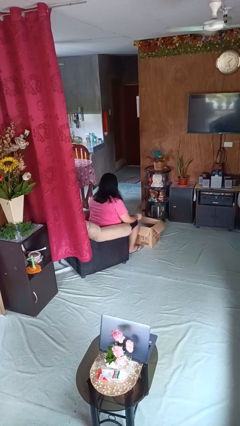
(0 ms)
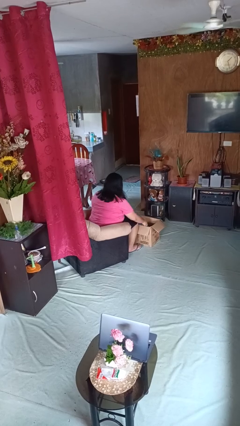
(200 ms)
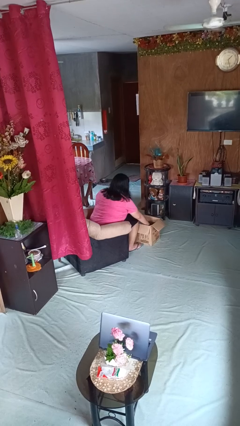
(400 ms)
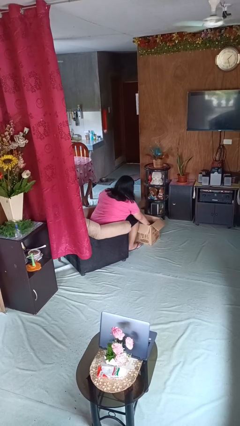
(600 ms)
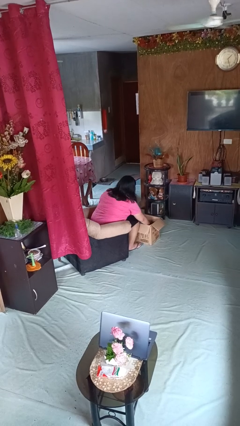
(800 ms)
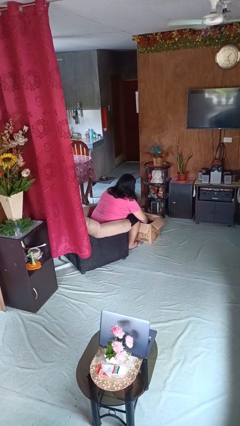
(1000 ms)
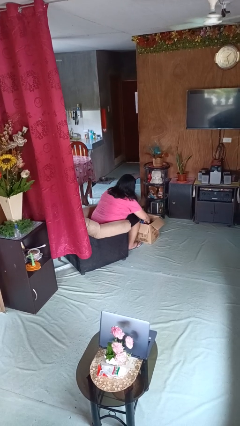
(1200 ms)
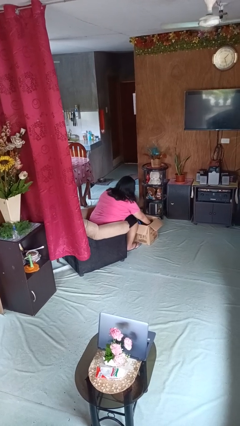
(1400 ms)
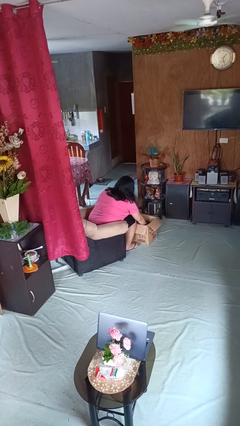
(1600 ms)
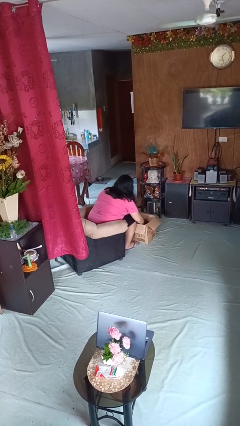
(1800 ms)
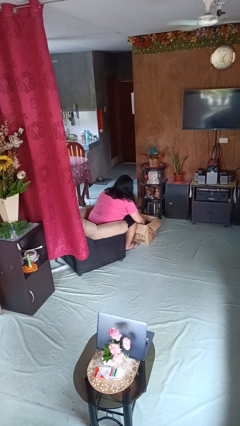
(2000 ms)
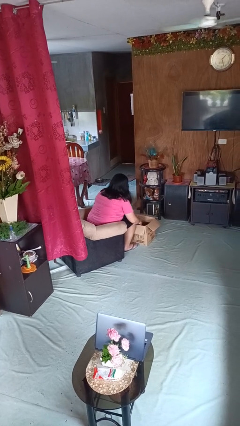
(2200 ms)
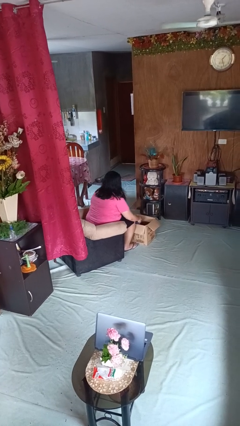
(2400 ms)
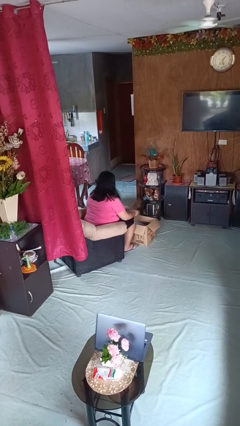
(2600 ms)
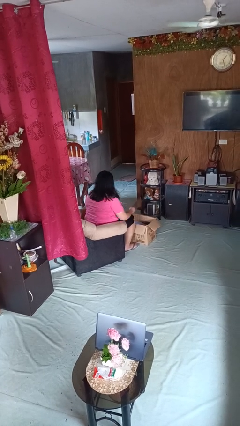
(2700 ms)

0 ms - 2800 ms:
person searches in box

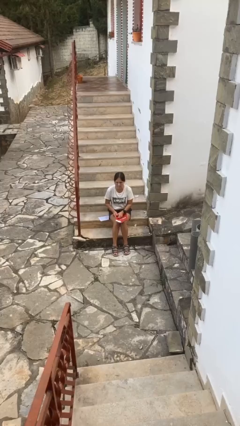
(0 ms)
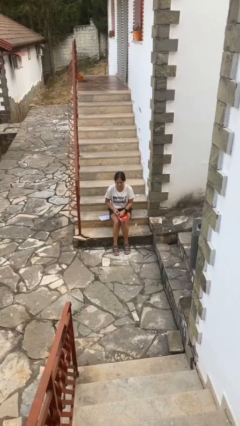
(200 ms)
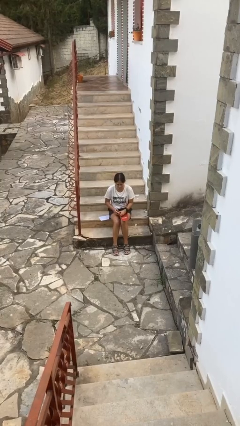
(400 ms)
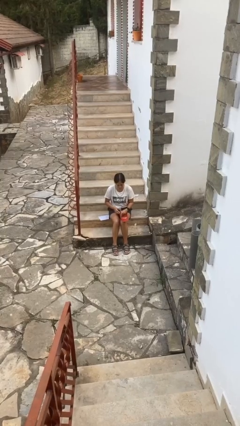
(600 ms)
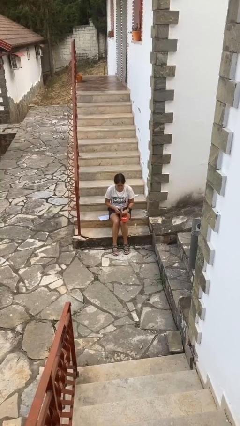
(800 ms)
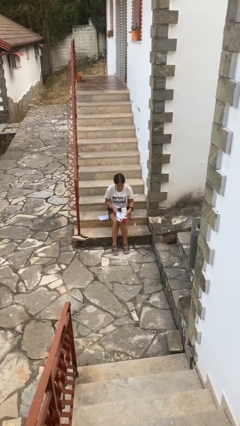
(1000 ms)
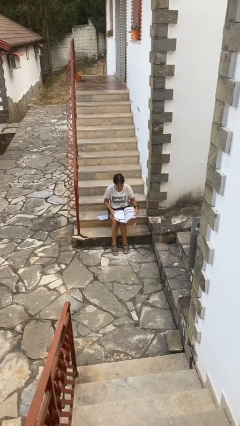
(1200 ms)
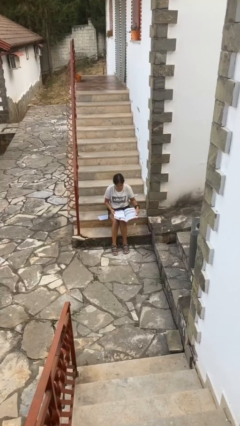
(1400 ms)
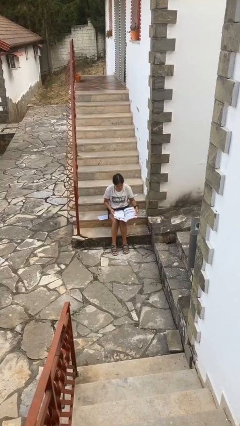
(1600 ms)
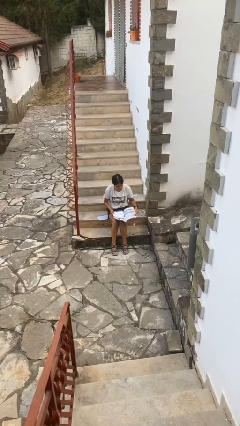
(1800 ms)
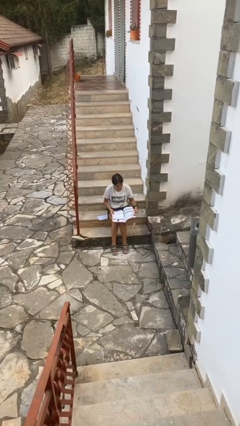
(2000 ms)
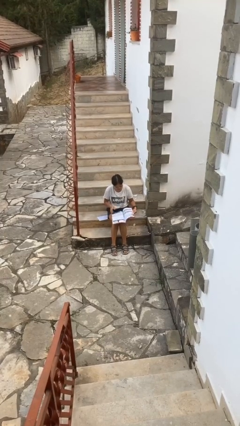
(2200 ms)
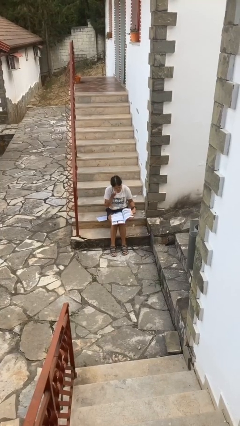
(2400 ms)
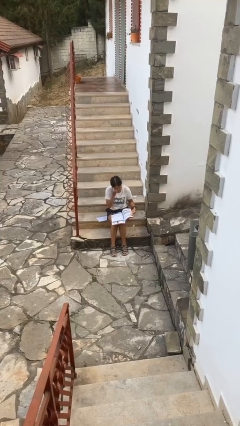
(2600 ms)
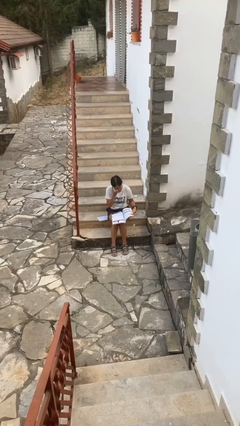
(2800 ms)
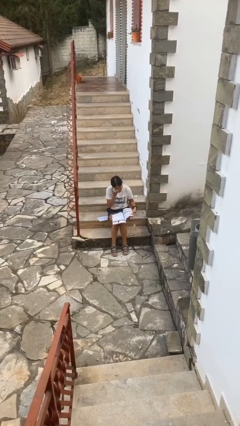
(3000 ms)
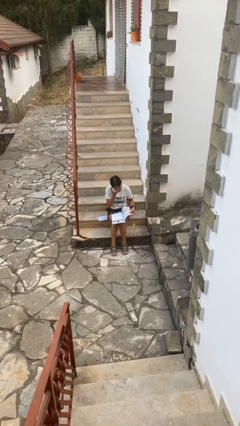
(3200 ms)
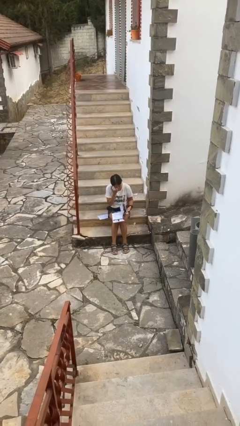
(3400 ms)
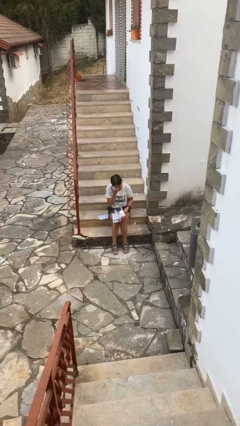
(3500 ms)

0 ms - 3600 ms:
person reads magazine

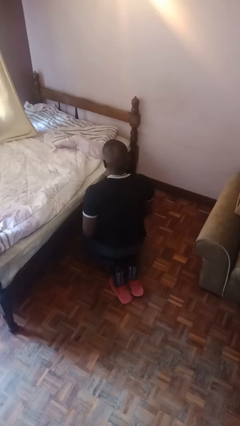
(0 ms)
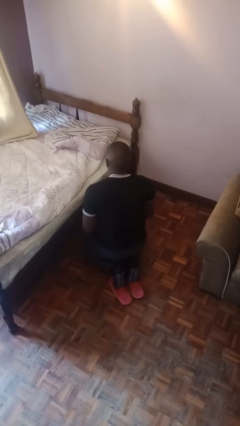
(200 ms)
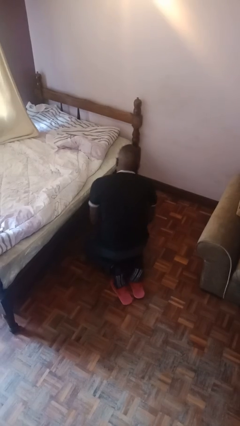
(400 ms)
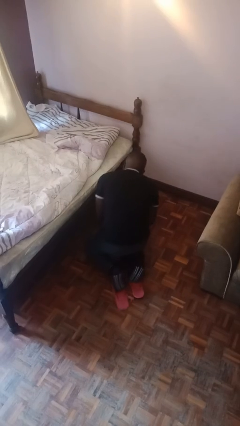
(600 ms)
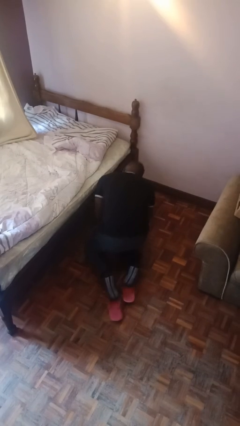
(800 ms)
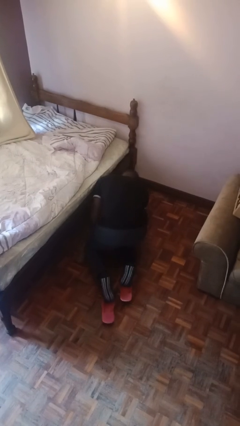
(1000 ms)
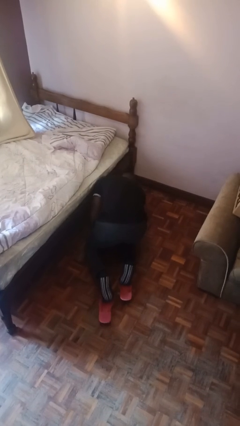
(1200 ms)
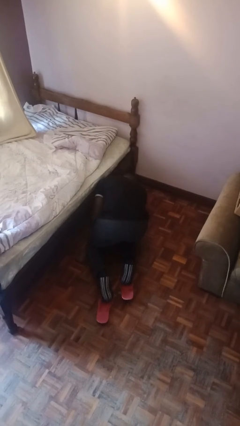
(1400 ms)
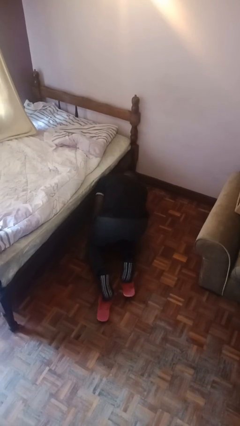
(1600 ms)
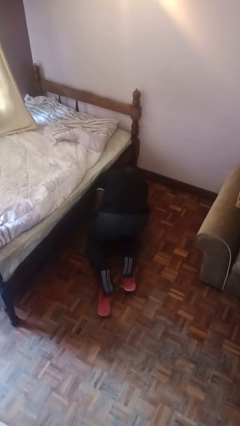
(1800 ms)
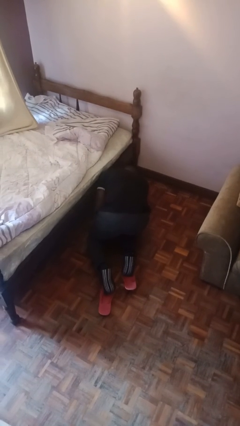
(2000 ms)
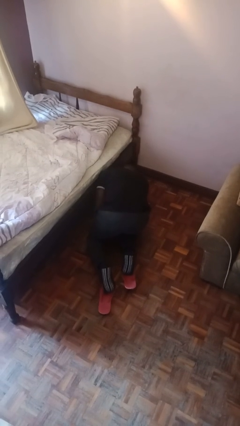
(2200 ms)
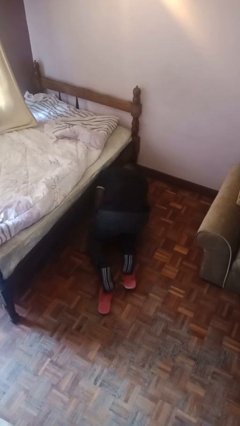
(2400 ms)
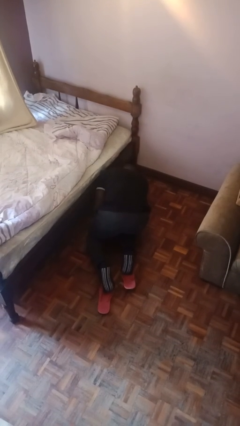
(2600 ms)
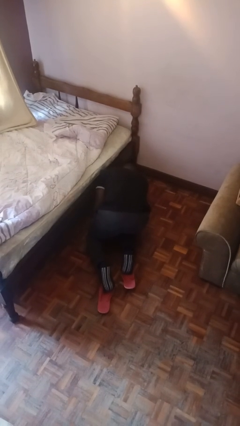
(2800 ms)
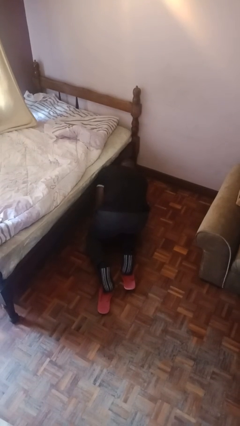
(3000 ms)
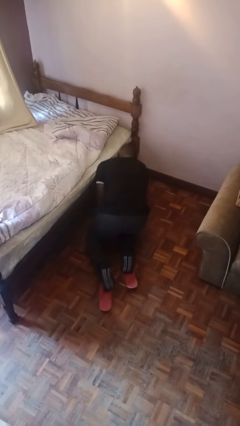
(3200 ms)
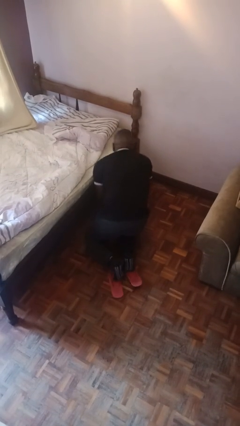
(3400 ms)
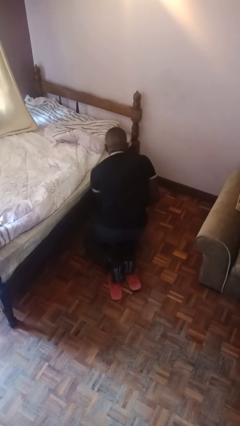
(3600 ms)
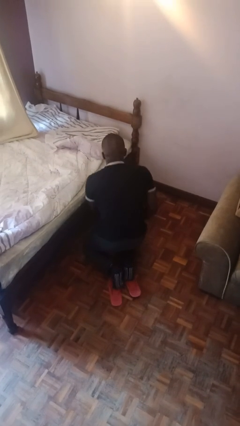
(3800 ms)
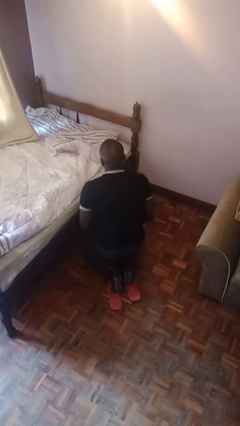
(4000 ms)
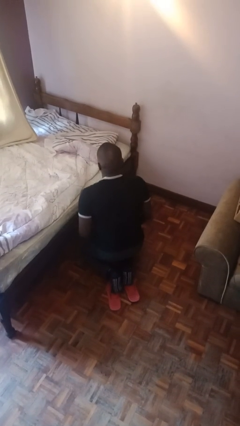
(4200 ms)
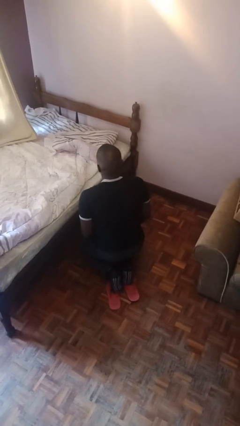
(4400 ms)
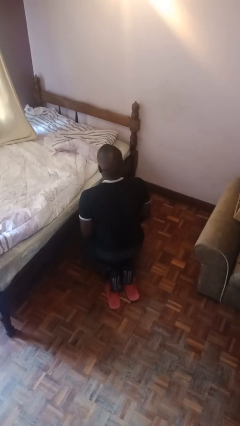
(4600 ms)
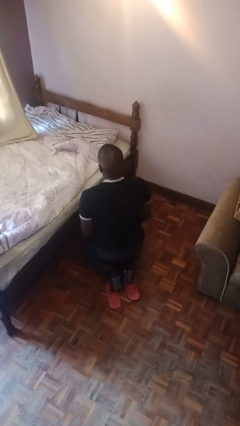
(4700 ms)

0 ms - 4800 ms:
person searches under bed

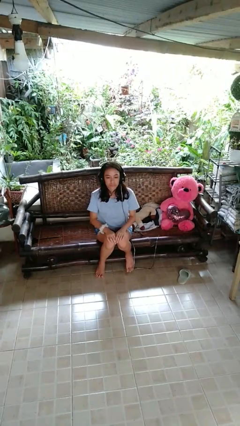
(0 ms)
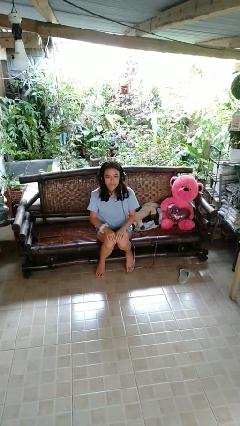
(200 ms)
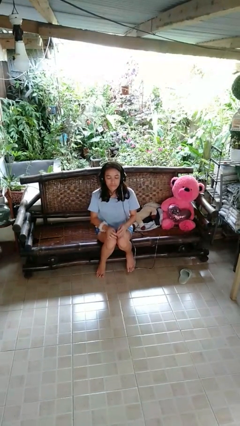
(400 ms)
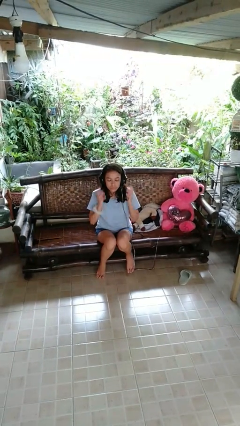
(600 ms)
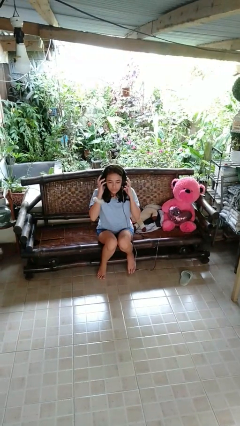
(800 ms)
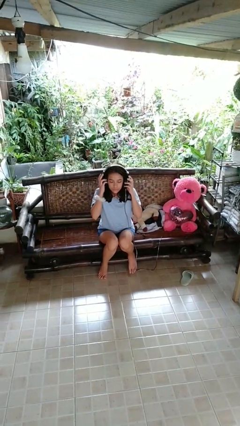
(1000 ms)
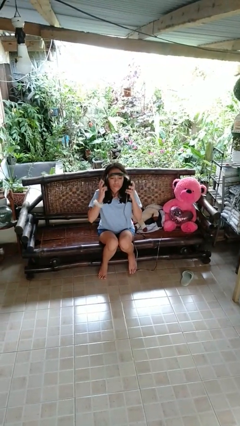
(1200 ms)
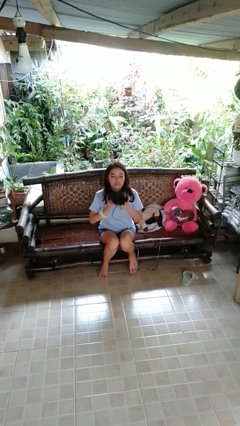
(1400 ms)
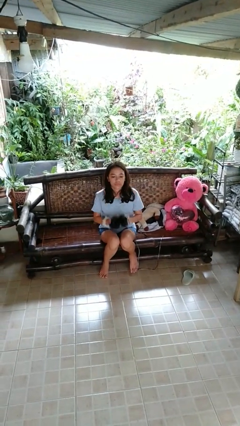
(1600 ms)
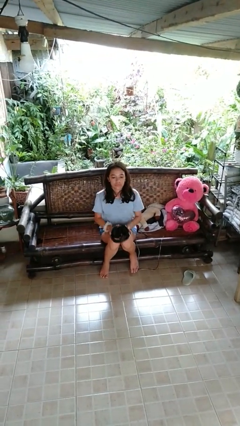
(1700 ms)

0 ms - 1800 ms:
person takes off headphones

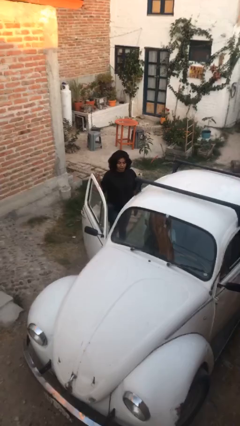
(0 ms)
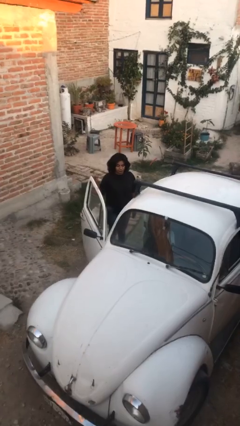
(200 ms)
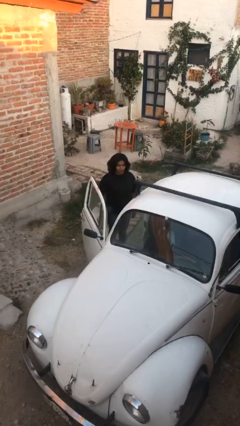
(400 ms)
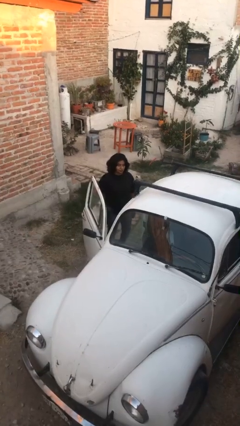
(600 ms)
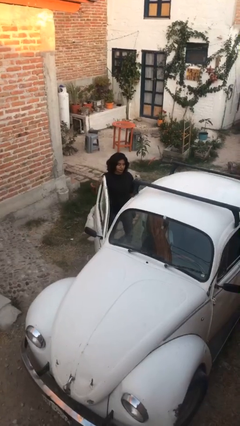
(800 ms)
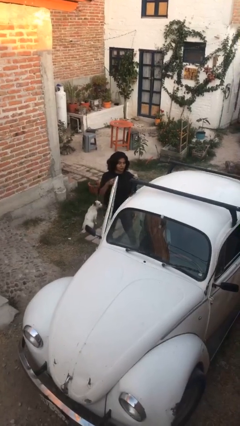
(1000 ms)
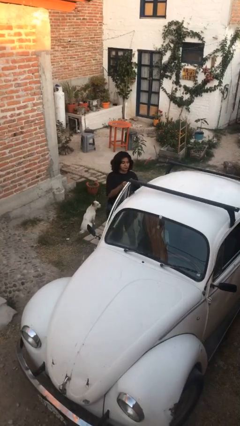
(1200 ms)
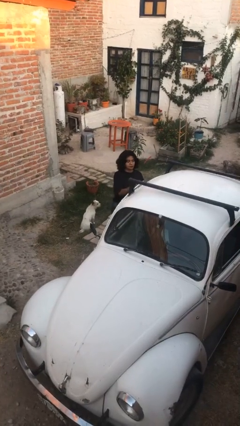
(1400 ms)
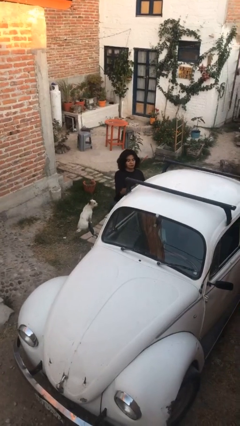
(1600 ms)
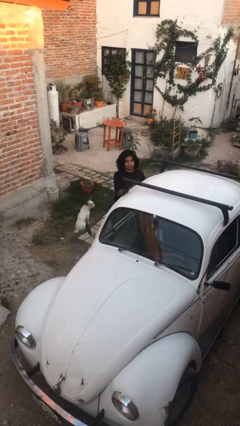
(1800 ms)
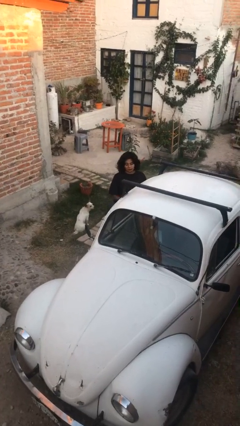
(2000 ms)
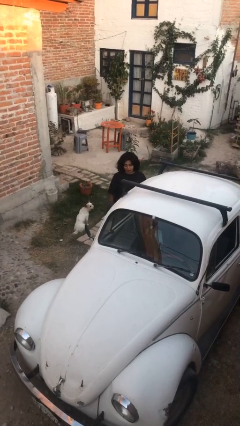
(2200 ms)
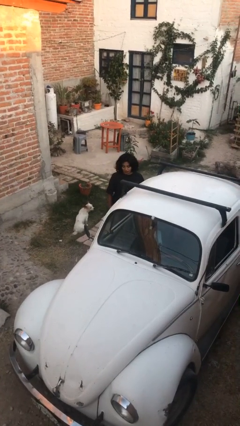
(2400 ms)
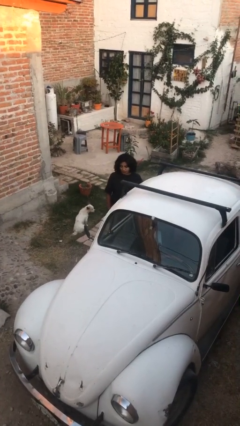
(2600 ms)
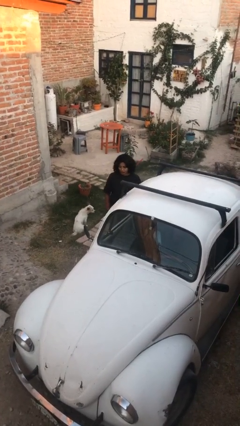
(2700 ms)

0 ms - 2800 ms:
person closes car door

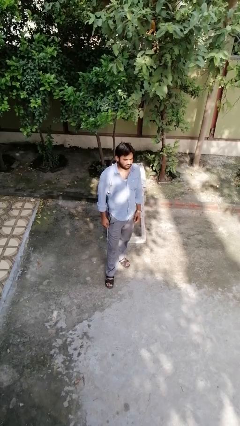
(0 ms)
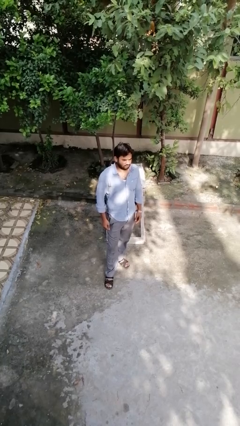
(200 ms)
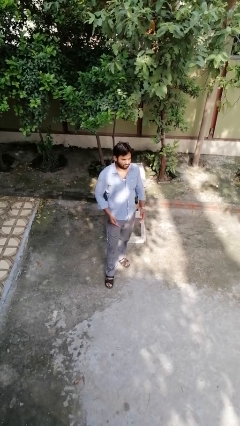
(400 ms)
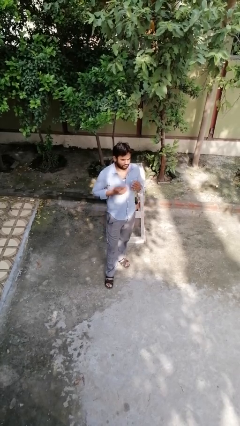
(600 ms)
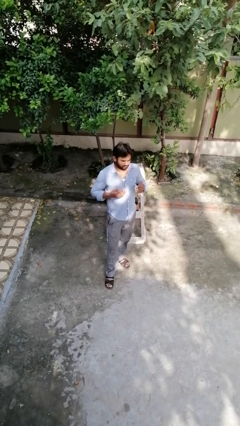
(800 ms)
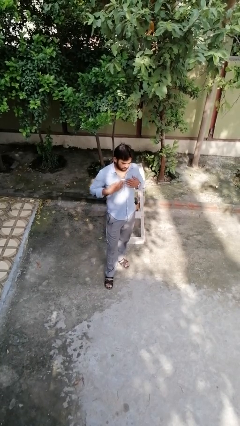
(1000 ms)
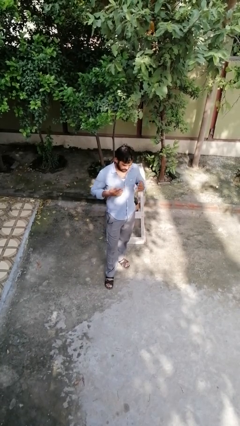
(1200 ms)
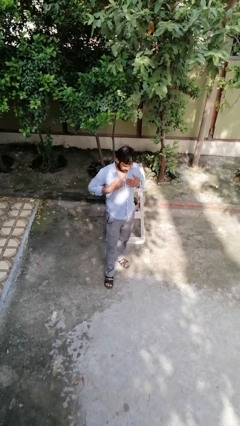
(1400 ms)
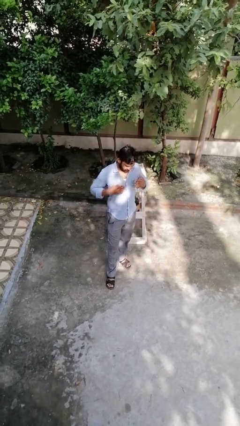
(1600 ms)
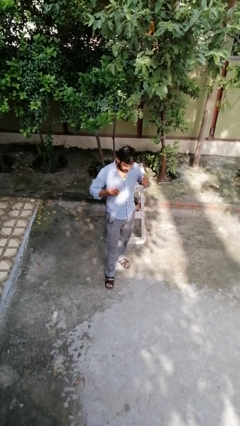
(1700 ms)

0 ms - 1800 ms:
person drums on chest
